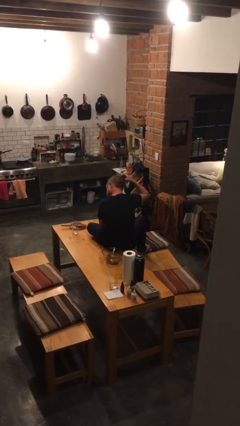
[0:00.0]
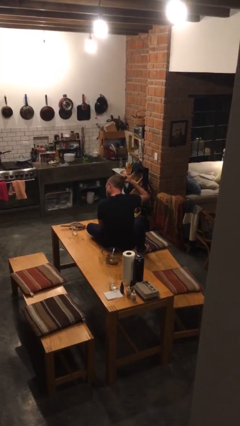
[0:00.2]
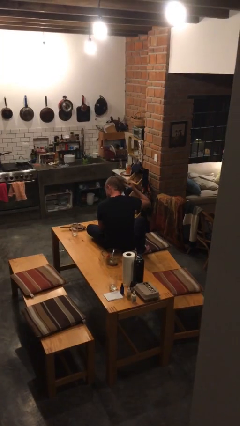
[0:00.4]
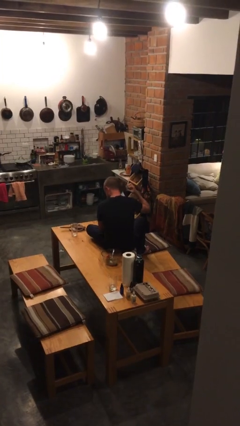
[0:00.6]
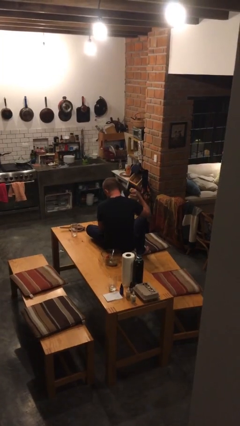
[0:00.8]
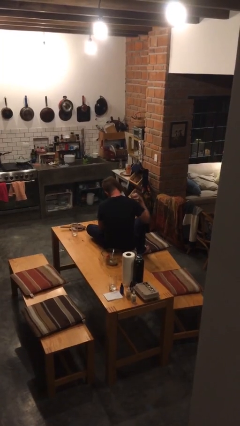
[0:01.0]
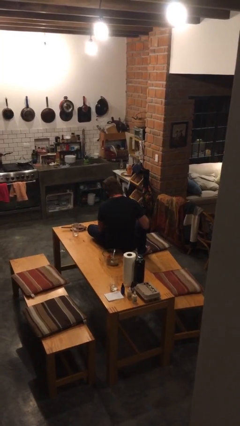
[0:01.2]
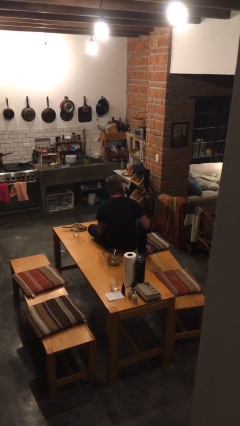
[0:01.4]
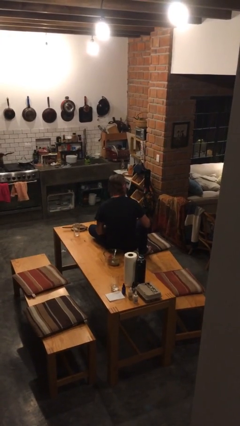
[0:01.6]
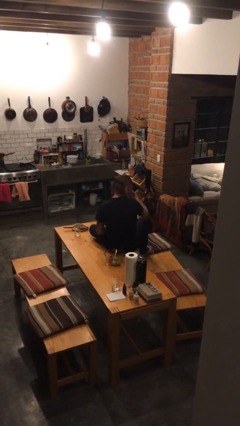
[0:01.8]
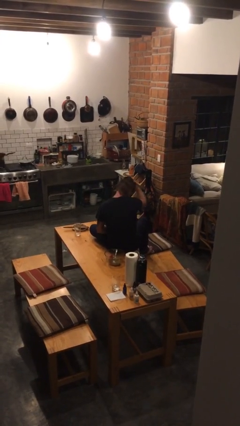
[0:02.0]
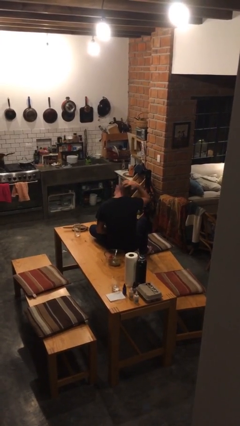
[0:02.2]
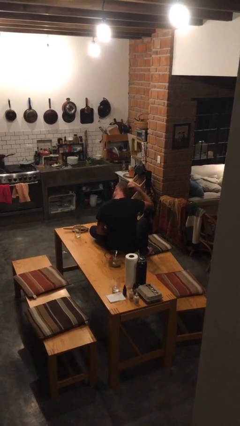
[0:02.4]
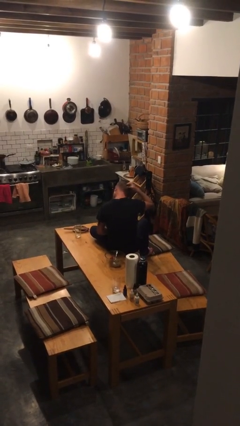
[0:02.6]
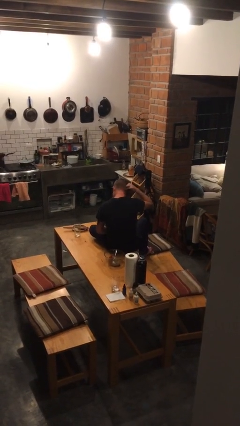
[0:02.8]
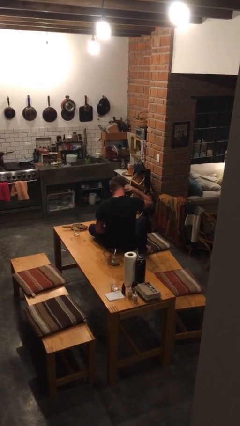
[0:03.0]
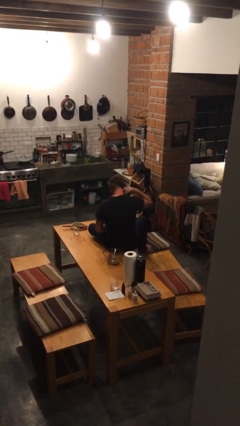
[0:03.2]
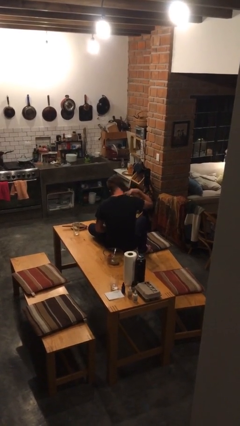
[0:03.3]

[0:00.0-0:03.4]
person strokes hair

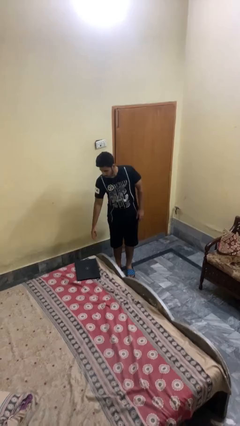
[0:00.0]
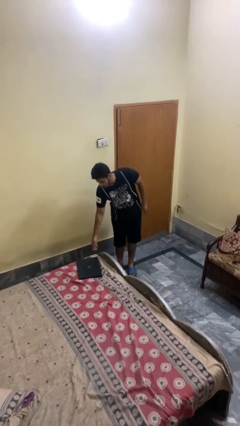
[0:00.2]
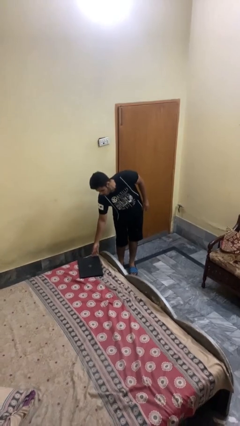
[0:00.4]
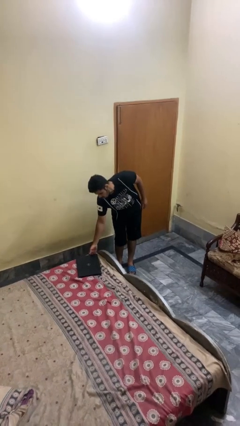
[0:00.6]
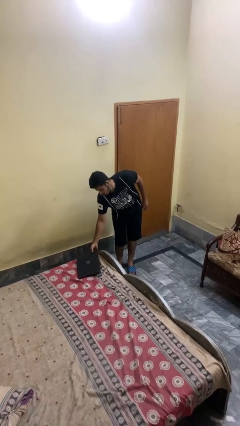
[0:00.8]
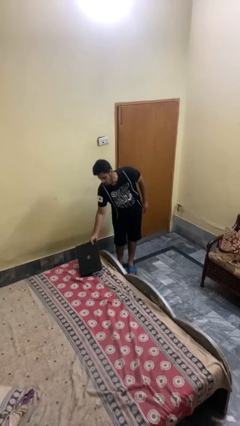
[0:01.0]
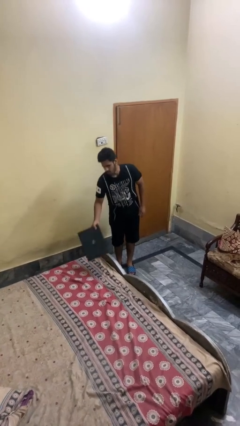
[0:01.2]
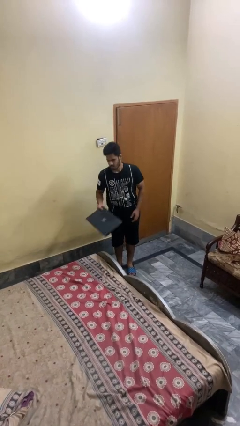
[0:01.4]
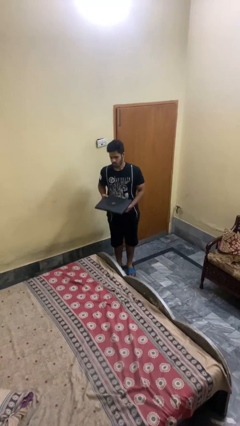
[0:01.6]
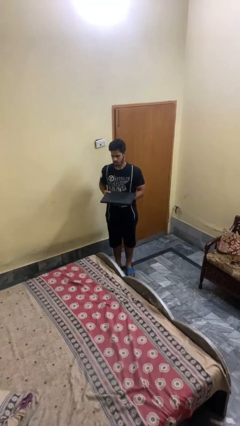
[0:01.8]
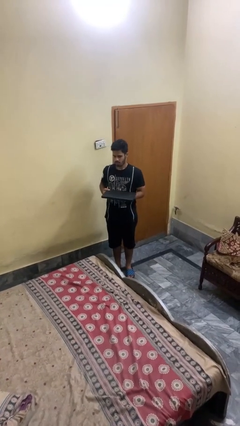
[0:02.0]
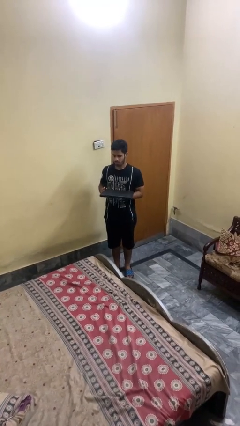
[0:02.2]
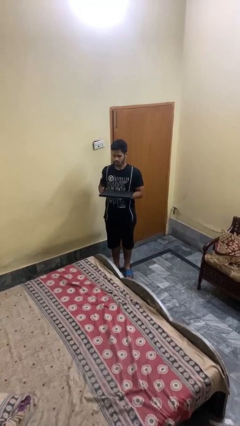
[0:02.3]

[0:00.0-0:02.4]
person picks up object from bed

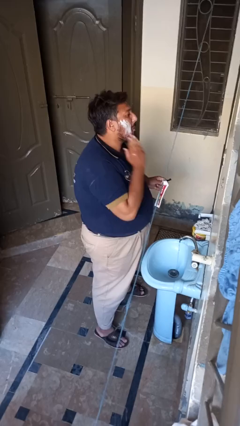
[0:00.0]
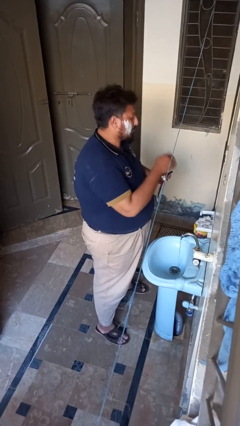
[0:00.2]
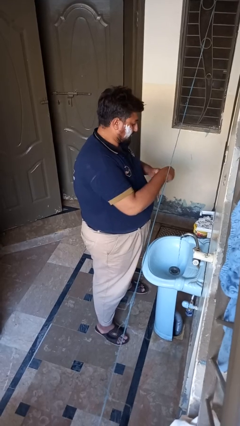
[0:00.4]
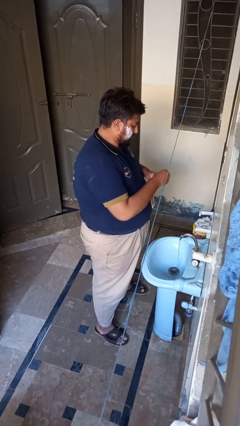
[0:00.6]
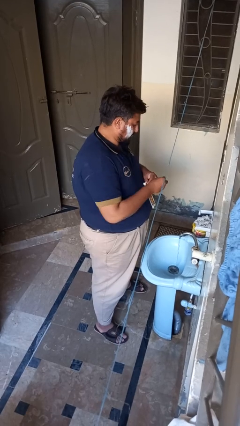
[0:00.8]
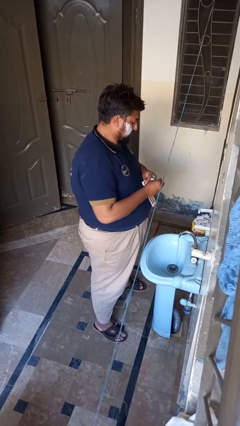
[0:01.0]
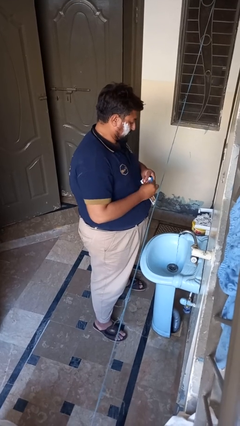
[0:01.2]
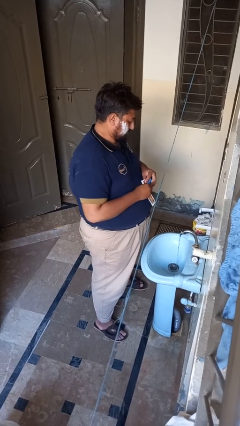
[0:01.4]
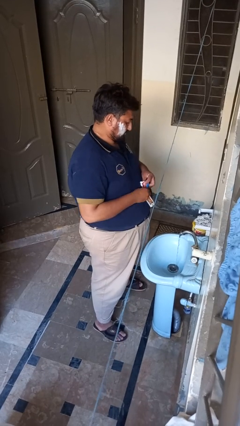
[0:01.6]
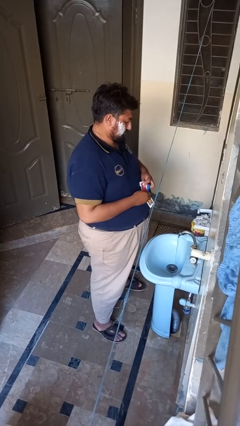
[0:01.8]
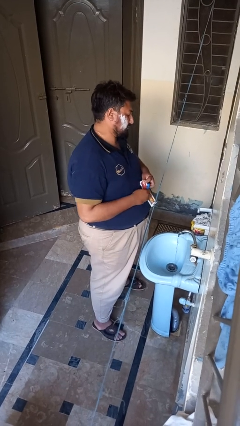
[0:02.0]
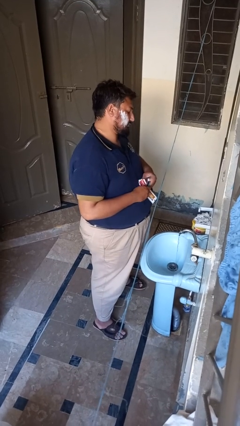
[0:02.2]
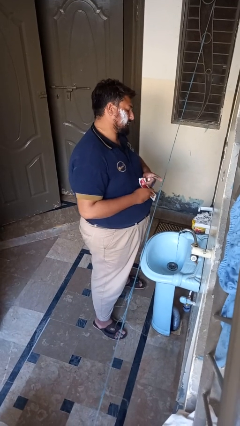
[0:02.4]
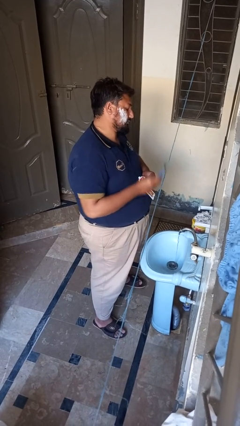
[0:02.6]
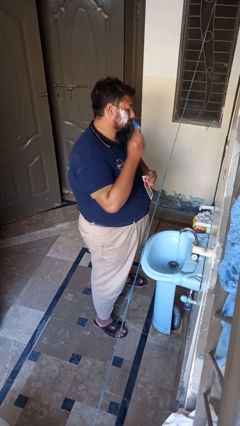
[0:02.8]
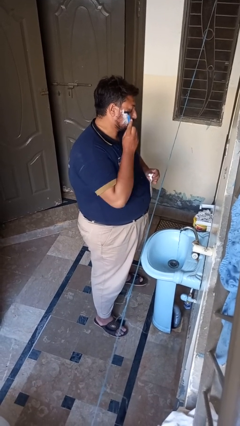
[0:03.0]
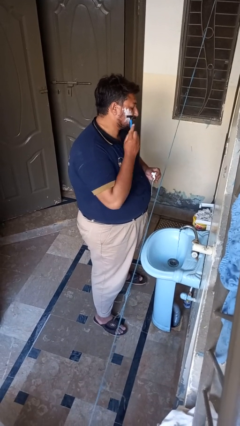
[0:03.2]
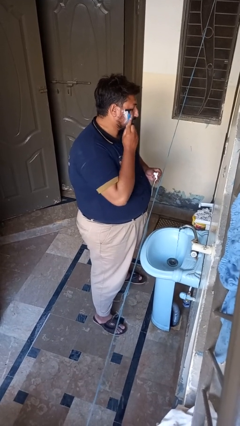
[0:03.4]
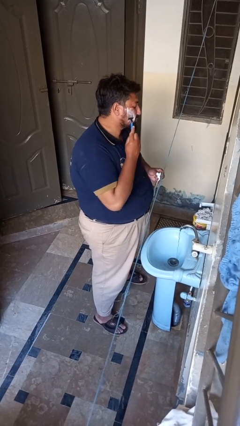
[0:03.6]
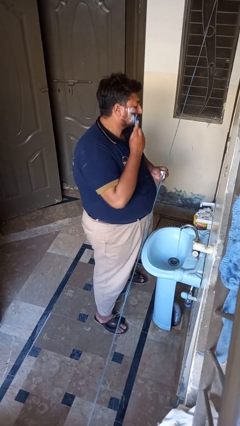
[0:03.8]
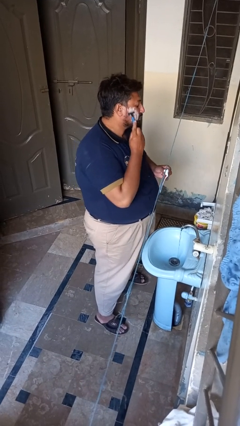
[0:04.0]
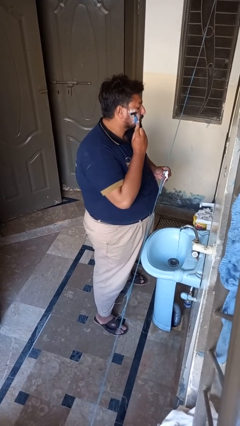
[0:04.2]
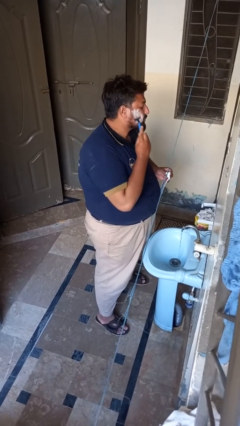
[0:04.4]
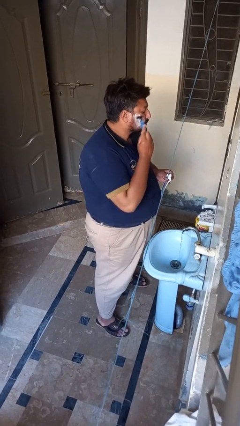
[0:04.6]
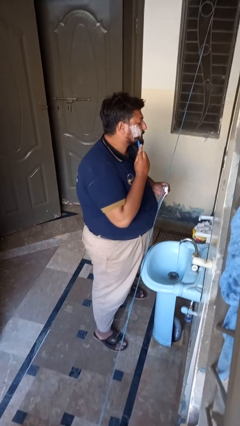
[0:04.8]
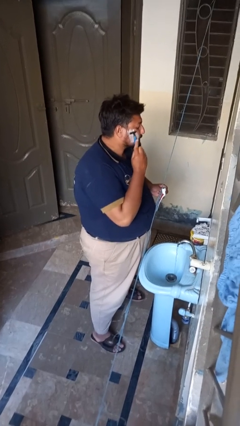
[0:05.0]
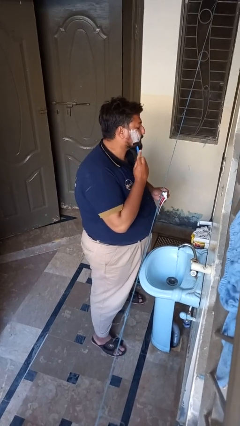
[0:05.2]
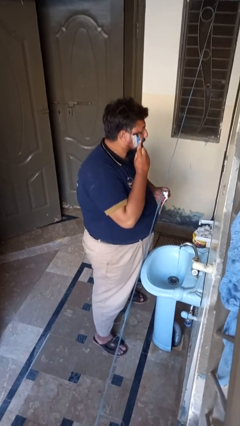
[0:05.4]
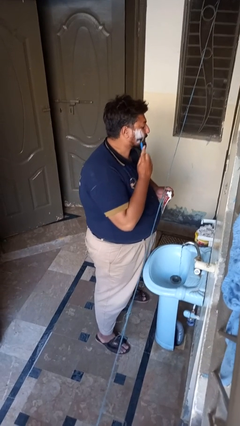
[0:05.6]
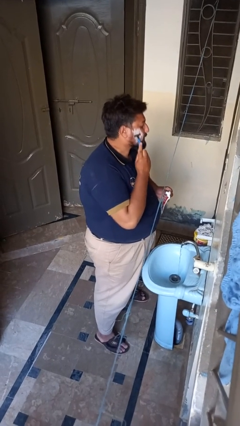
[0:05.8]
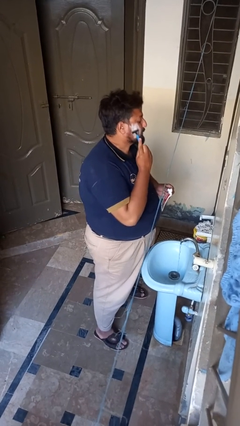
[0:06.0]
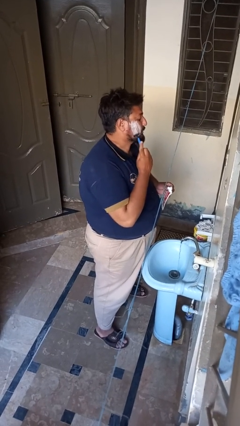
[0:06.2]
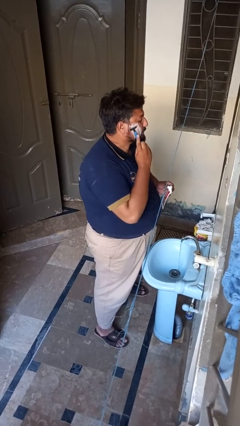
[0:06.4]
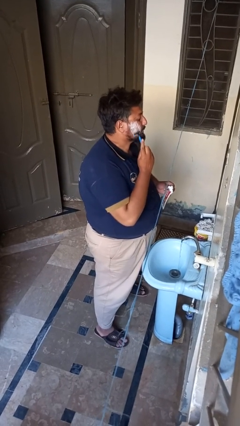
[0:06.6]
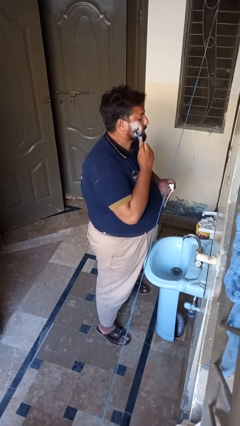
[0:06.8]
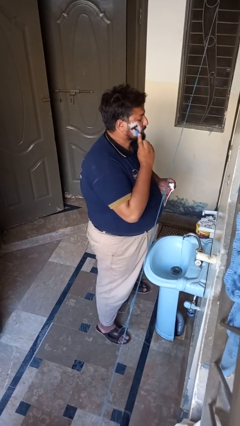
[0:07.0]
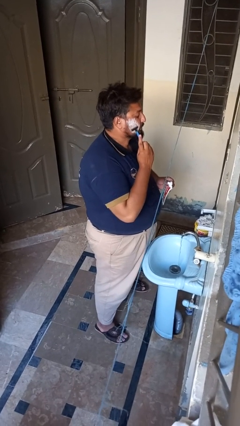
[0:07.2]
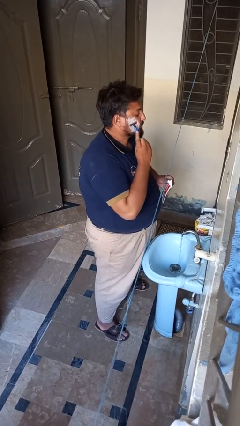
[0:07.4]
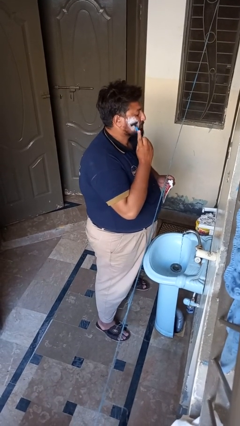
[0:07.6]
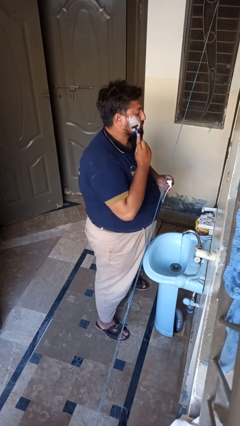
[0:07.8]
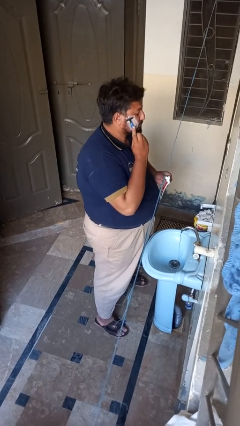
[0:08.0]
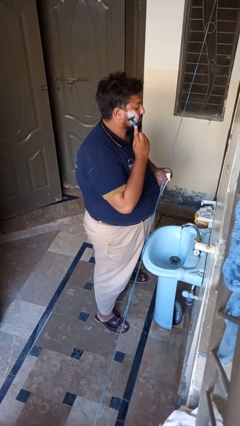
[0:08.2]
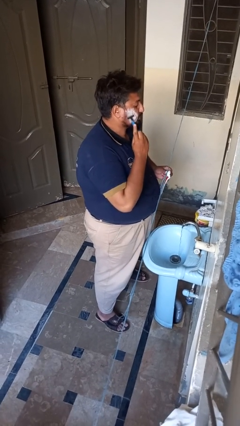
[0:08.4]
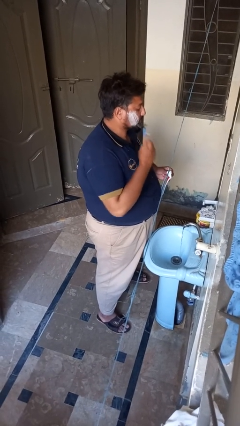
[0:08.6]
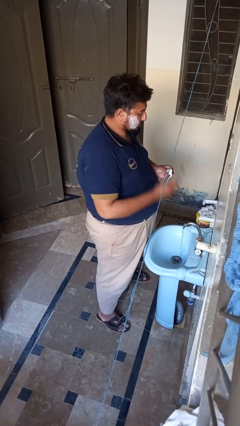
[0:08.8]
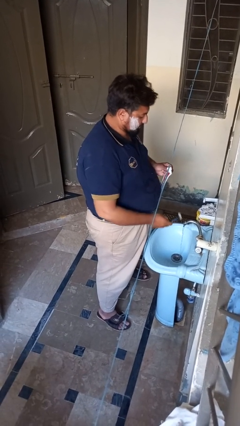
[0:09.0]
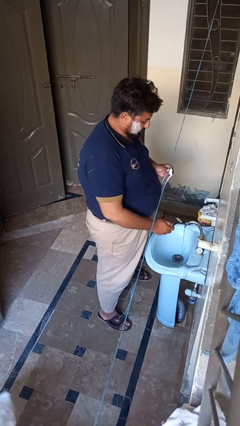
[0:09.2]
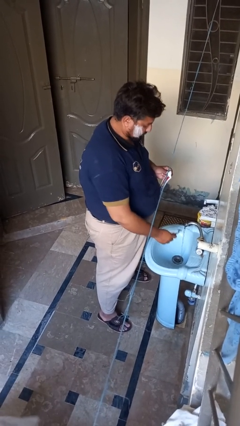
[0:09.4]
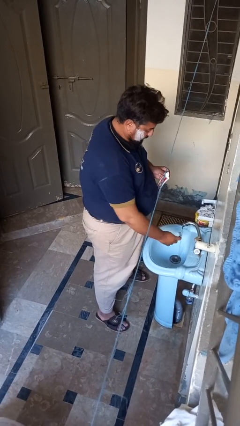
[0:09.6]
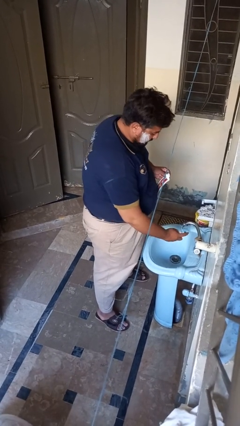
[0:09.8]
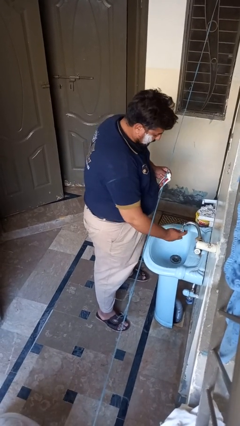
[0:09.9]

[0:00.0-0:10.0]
person shaves face

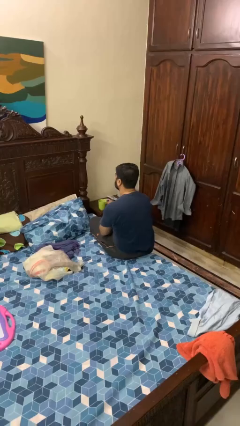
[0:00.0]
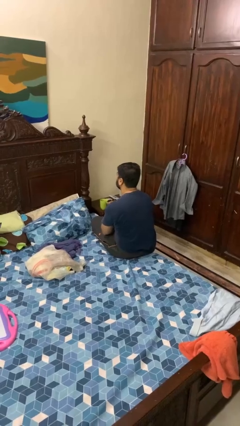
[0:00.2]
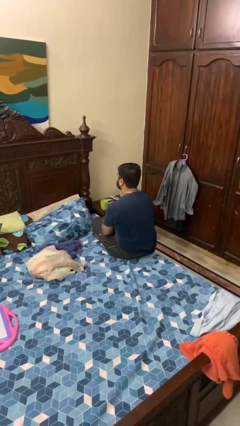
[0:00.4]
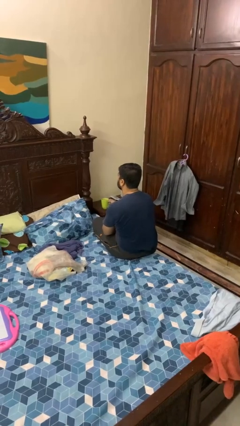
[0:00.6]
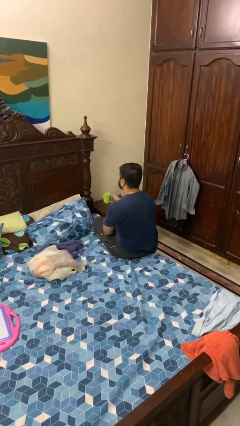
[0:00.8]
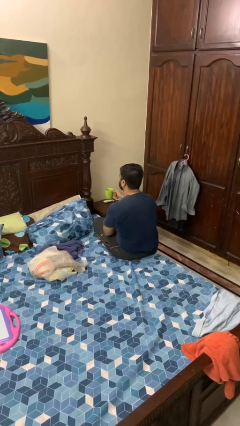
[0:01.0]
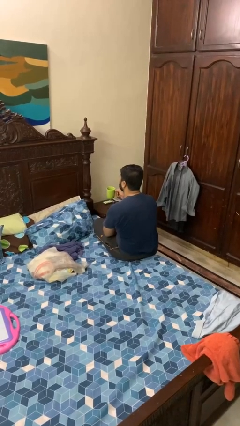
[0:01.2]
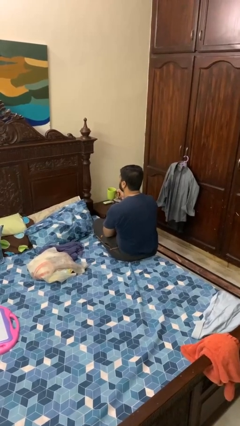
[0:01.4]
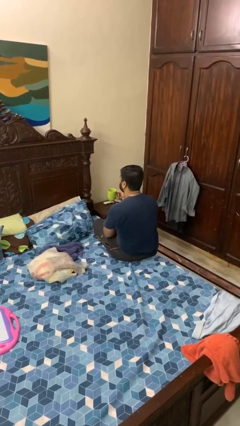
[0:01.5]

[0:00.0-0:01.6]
person picks up object from table

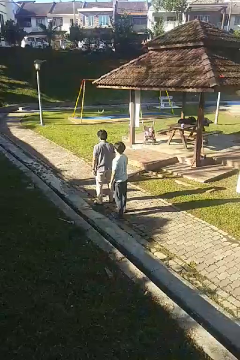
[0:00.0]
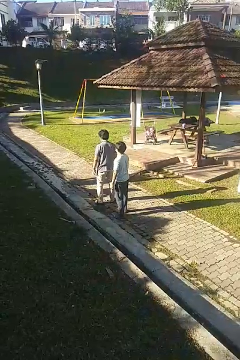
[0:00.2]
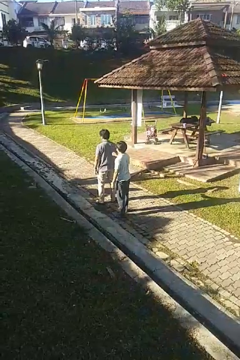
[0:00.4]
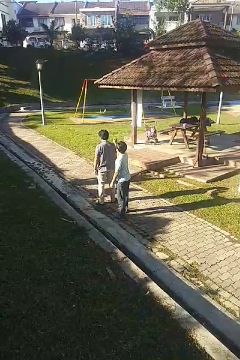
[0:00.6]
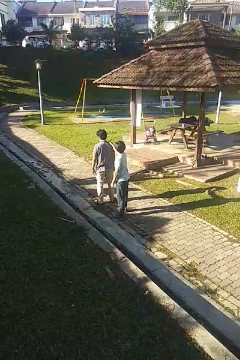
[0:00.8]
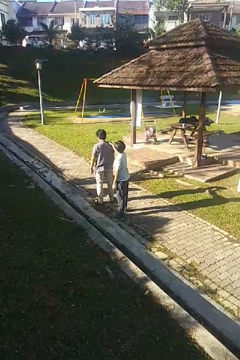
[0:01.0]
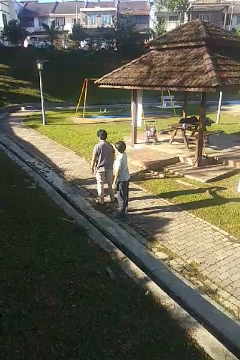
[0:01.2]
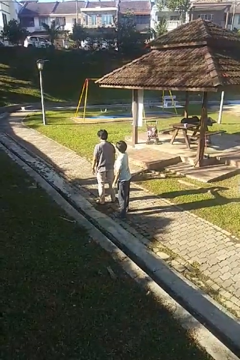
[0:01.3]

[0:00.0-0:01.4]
person grabs person by shoulder
